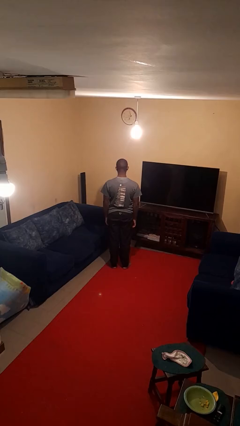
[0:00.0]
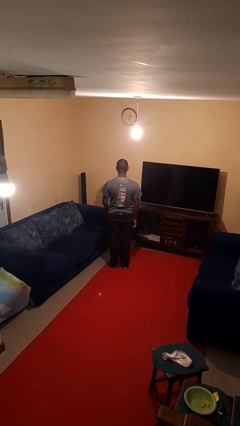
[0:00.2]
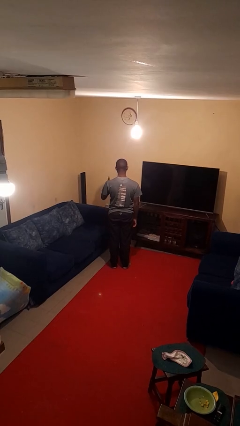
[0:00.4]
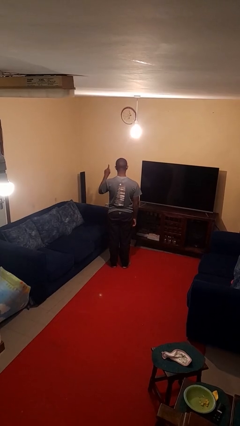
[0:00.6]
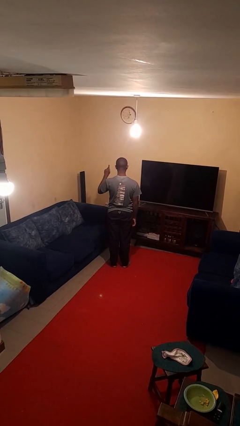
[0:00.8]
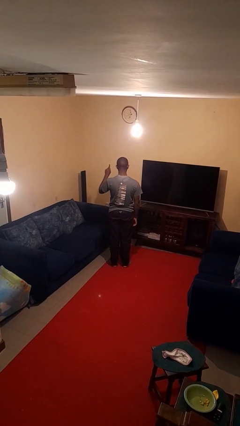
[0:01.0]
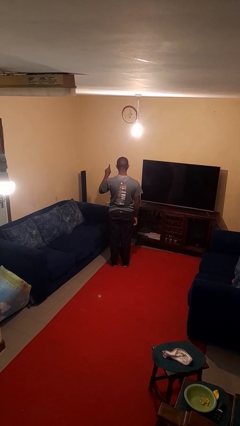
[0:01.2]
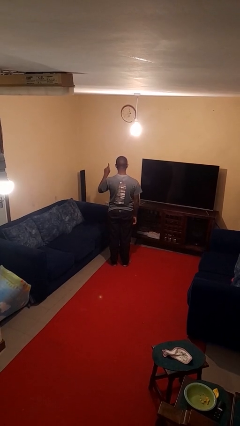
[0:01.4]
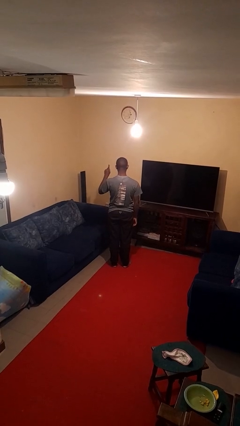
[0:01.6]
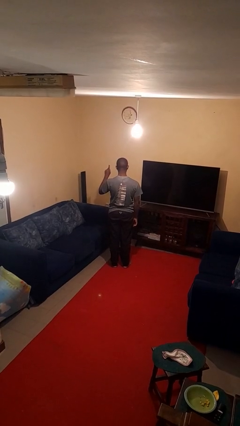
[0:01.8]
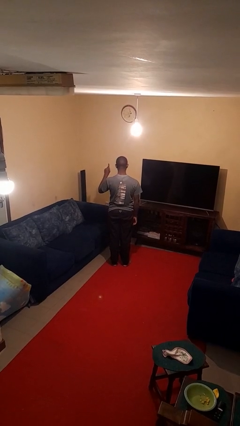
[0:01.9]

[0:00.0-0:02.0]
person gestures number one

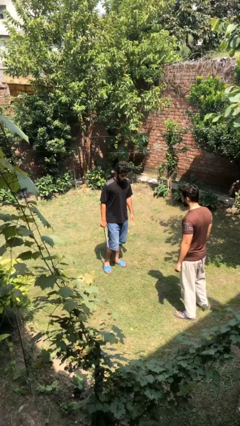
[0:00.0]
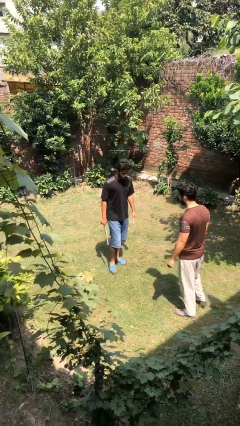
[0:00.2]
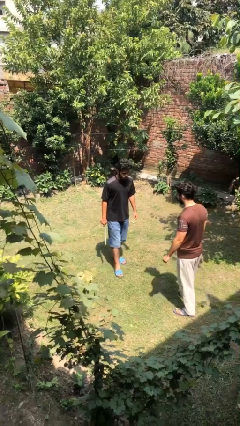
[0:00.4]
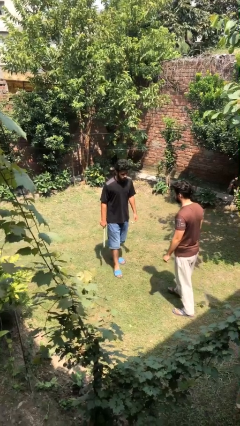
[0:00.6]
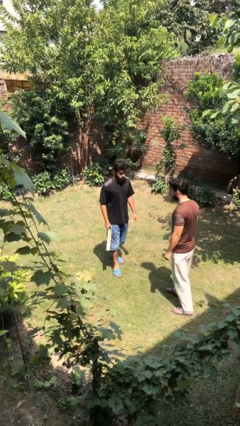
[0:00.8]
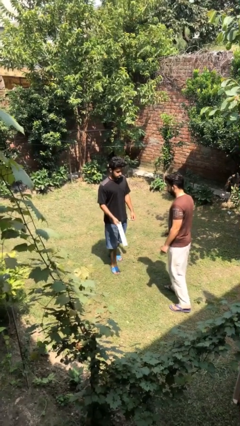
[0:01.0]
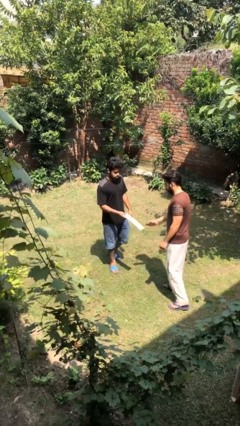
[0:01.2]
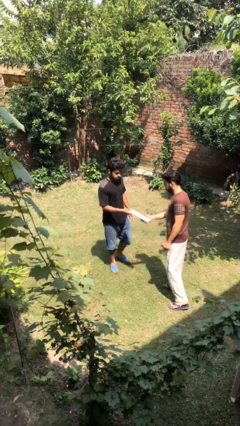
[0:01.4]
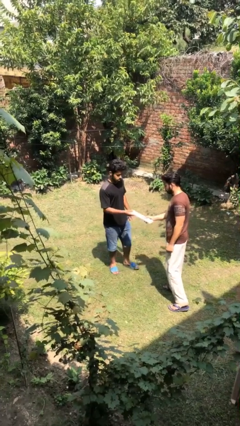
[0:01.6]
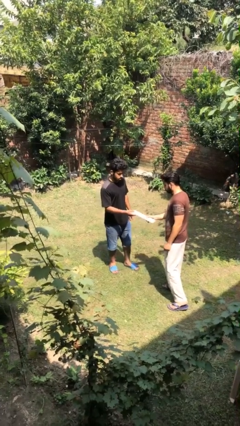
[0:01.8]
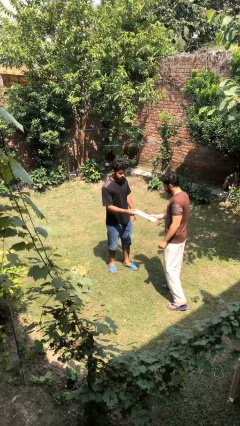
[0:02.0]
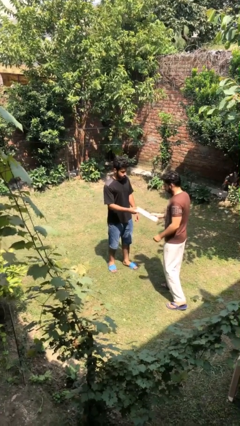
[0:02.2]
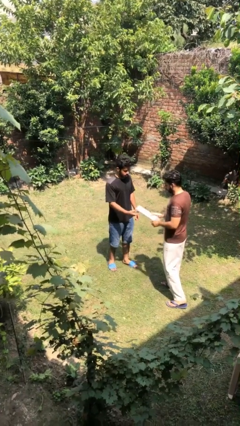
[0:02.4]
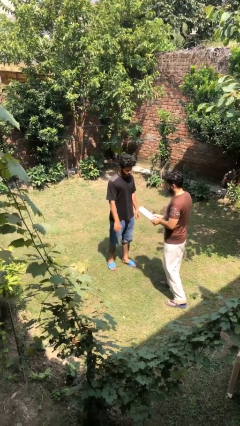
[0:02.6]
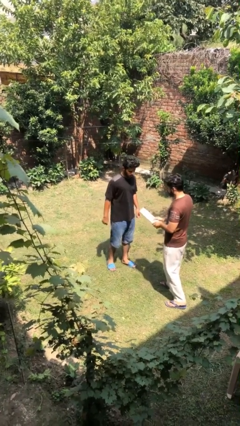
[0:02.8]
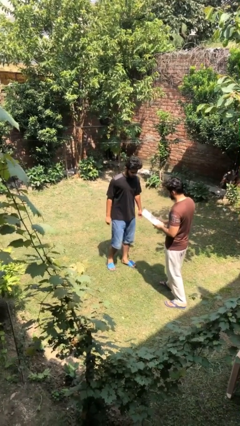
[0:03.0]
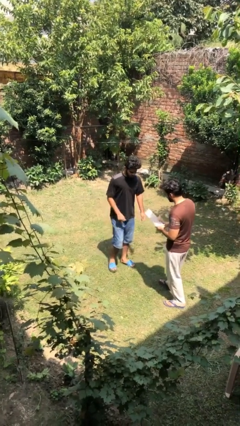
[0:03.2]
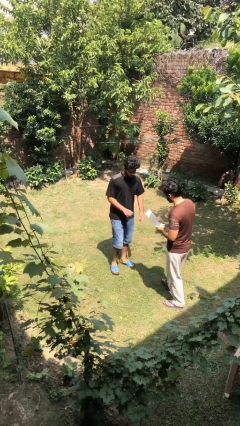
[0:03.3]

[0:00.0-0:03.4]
person transfers object to person

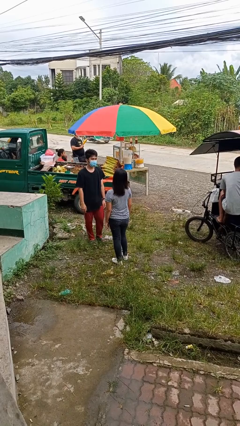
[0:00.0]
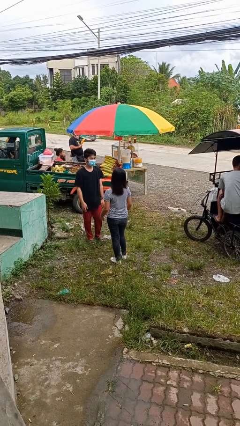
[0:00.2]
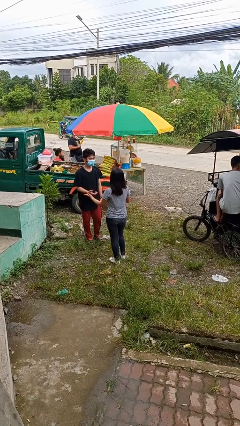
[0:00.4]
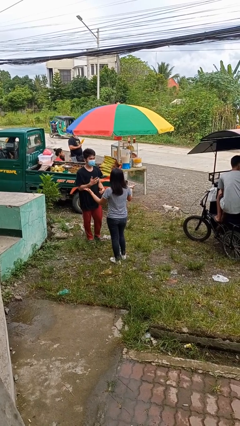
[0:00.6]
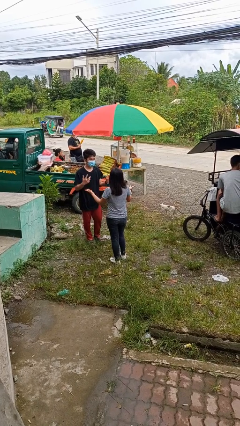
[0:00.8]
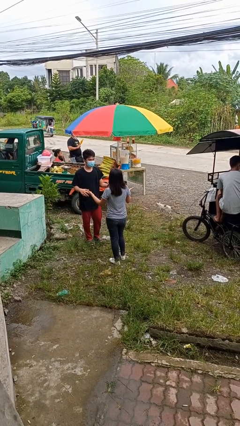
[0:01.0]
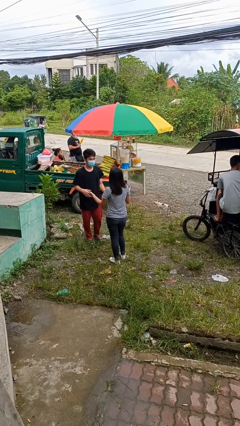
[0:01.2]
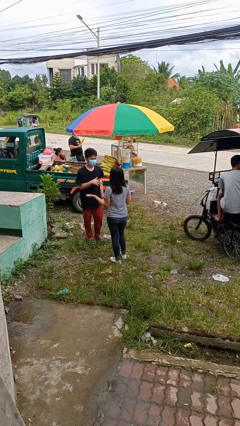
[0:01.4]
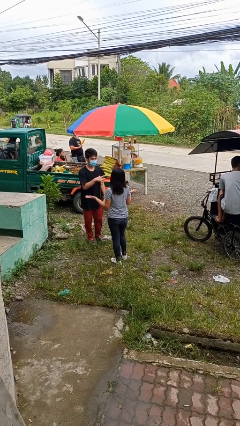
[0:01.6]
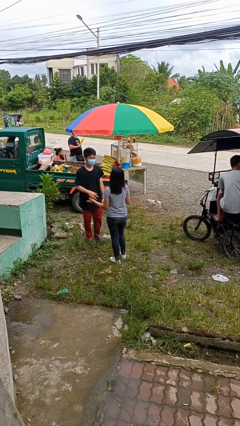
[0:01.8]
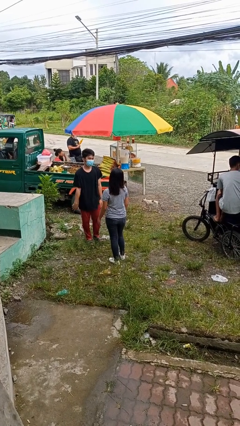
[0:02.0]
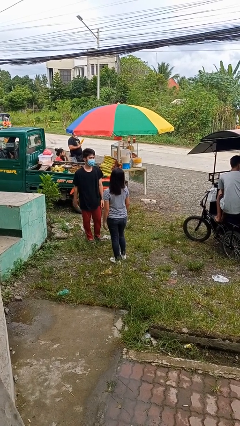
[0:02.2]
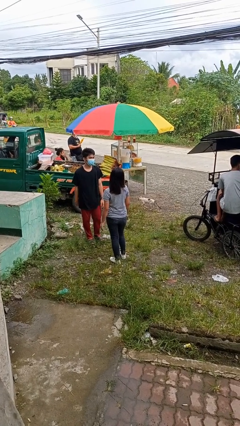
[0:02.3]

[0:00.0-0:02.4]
person talks to person

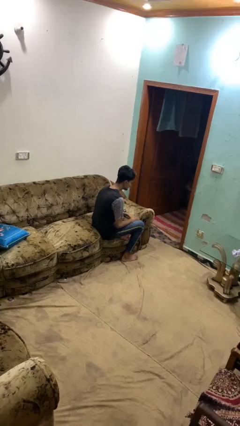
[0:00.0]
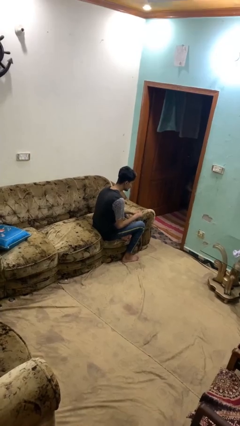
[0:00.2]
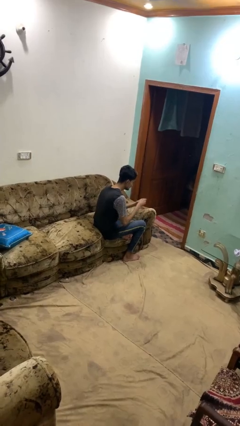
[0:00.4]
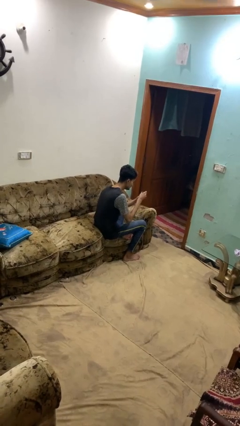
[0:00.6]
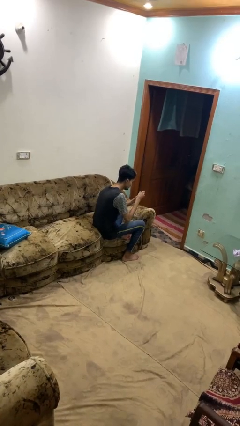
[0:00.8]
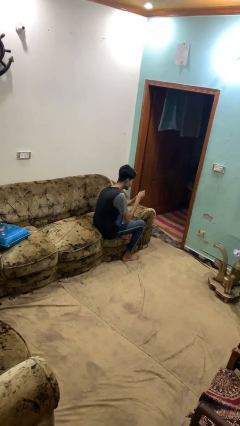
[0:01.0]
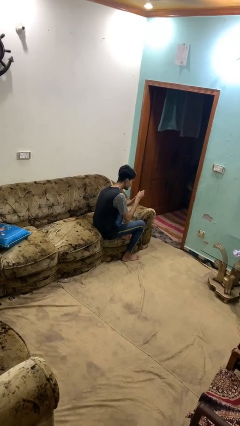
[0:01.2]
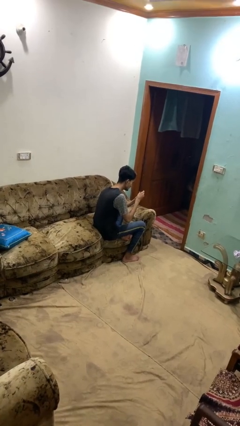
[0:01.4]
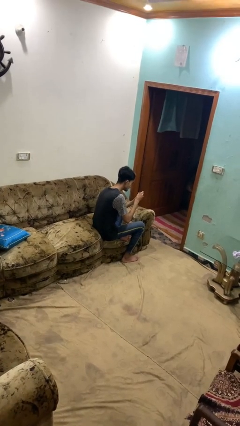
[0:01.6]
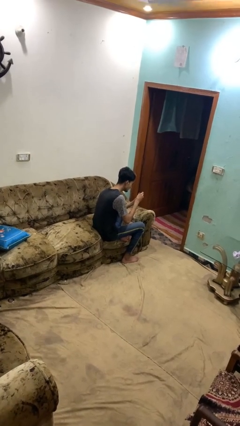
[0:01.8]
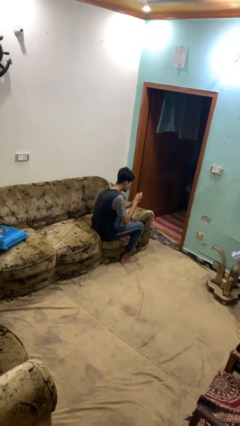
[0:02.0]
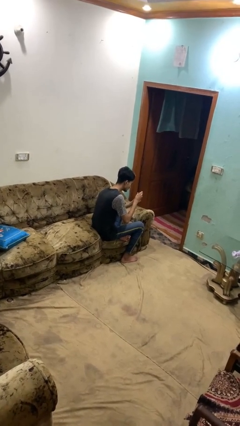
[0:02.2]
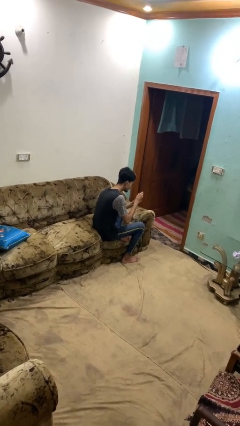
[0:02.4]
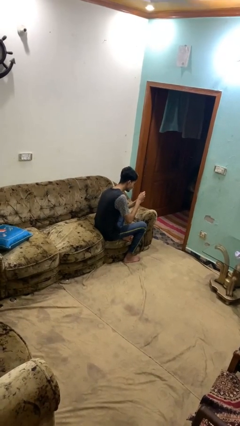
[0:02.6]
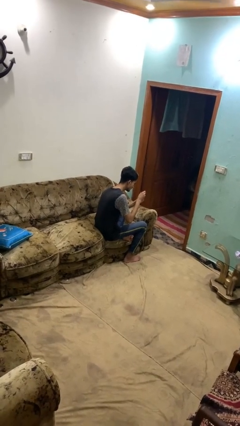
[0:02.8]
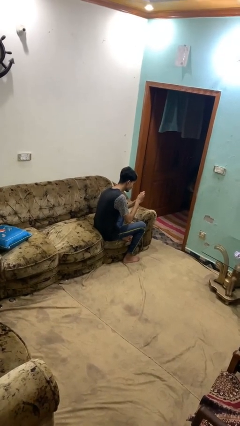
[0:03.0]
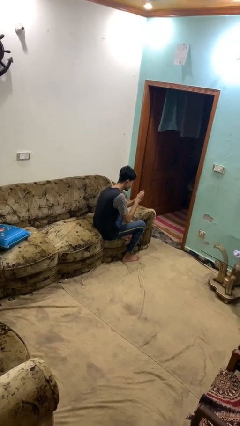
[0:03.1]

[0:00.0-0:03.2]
person clips fingernails

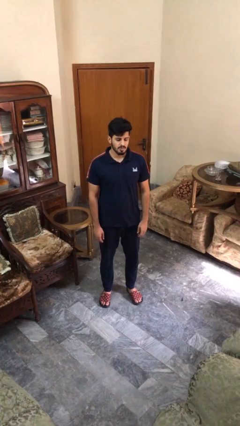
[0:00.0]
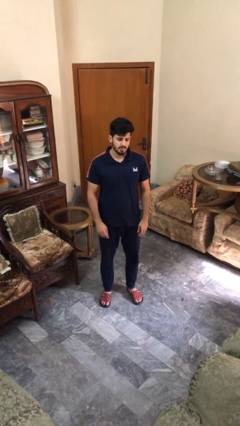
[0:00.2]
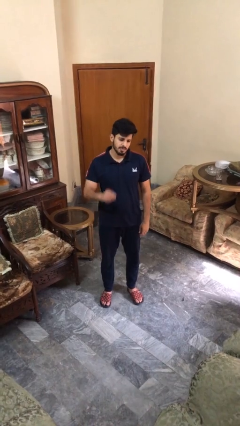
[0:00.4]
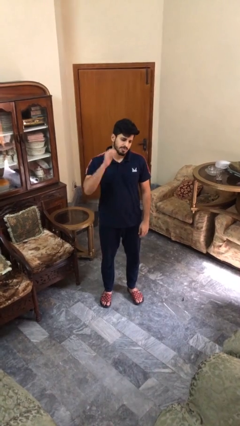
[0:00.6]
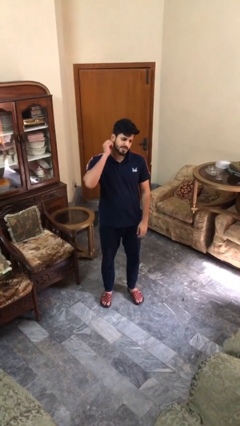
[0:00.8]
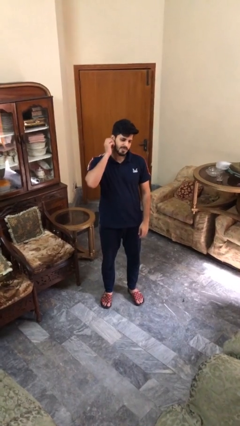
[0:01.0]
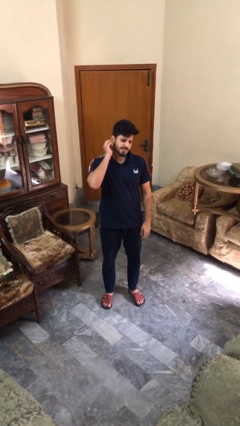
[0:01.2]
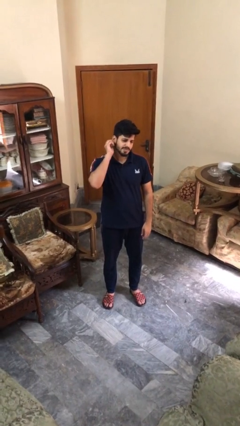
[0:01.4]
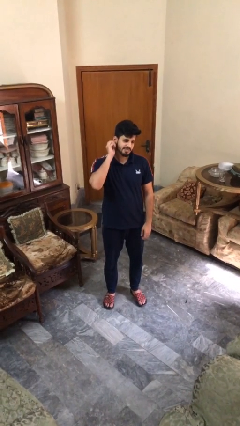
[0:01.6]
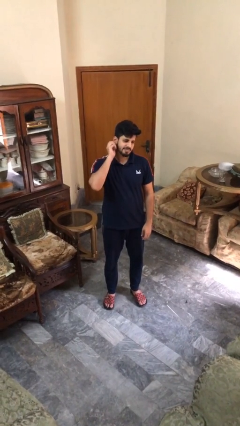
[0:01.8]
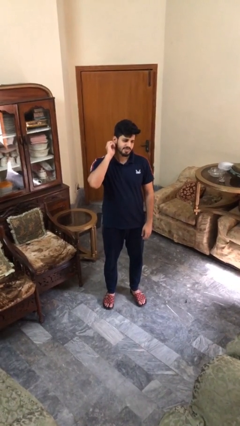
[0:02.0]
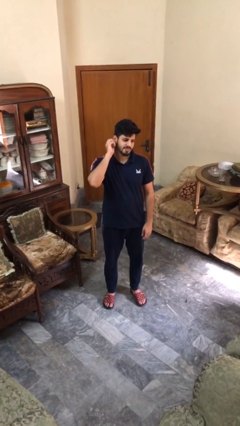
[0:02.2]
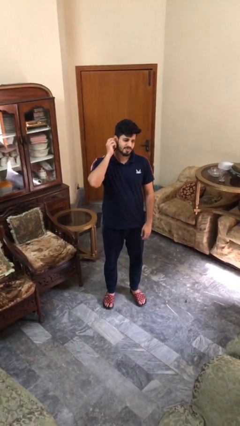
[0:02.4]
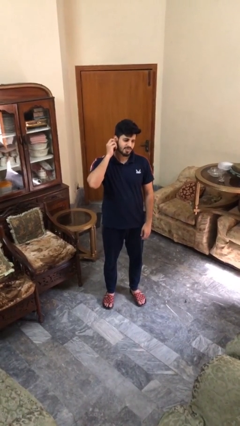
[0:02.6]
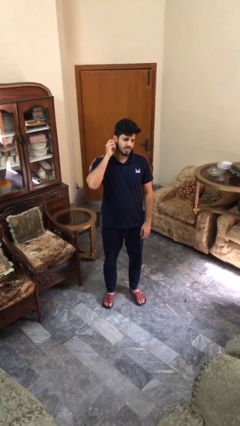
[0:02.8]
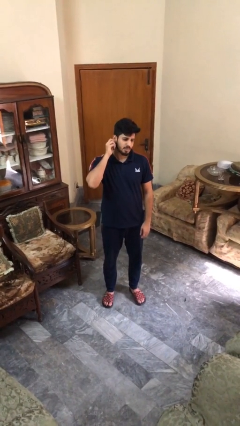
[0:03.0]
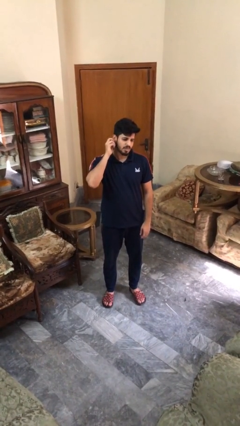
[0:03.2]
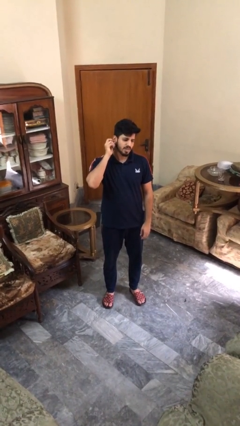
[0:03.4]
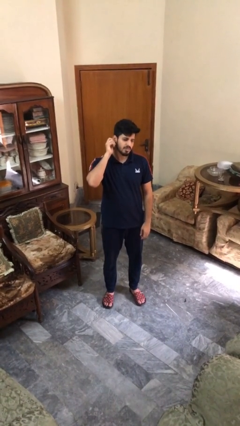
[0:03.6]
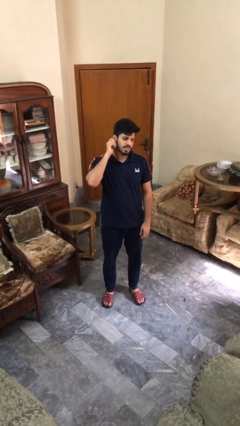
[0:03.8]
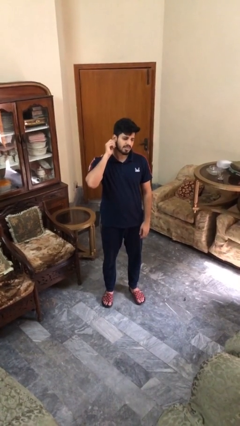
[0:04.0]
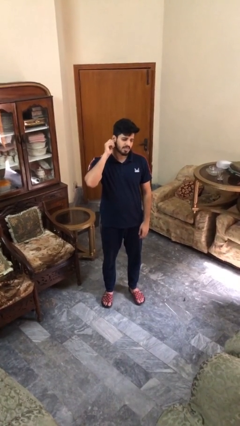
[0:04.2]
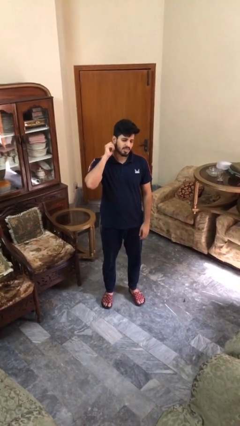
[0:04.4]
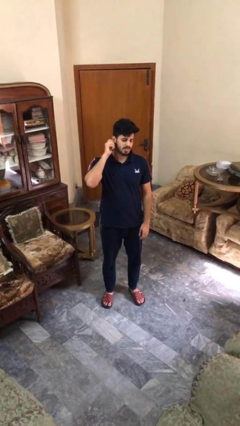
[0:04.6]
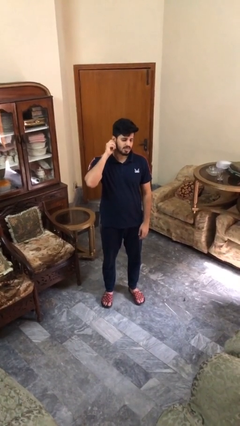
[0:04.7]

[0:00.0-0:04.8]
person touches earlobe

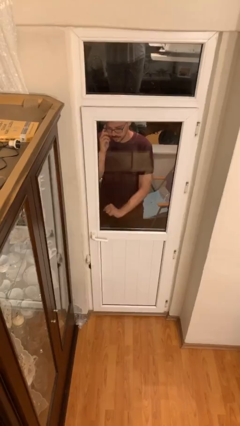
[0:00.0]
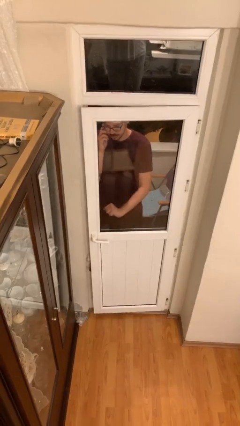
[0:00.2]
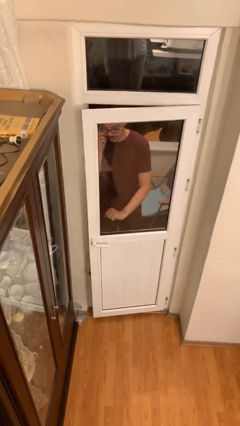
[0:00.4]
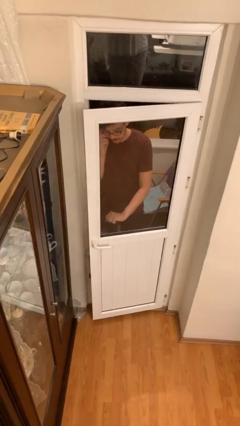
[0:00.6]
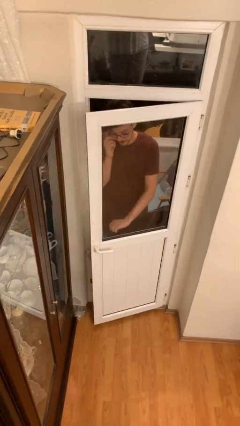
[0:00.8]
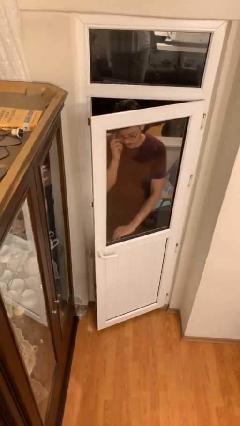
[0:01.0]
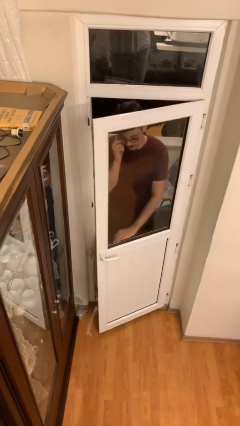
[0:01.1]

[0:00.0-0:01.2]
person opens facility door

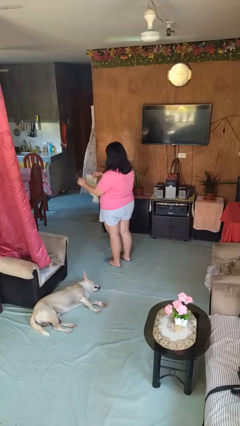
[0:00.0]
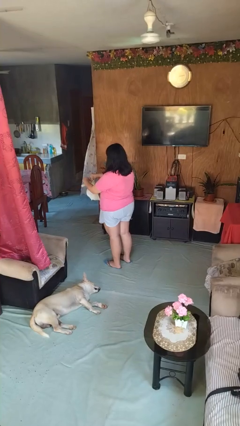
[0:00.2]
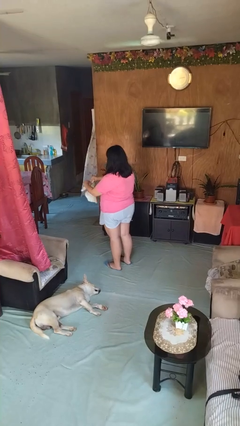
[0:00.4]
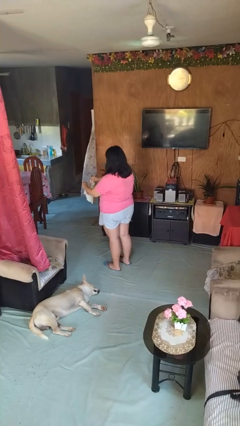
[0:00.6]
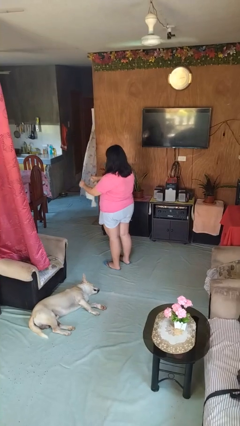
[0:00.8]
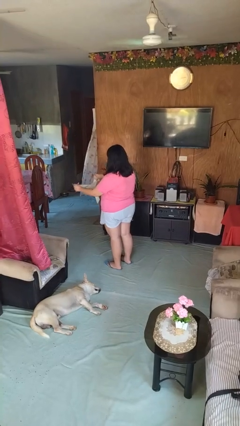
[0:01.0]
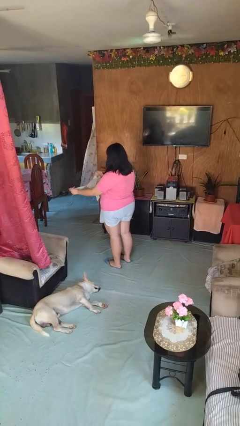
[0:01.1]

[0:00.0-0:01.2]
person tears paper
